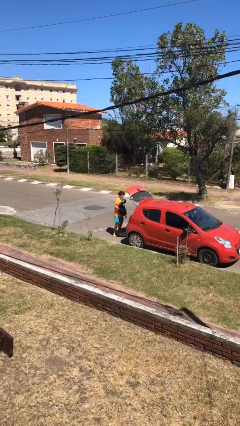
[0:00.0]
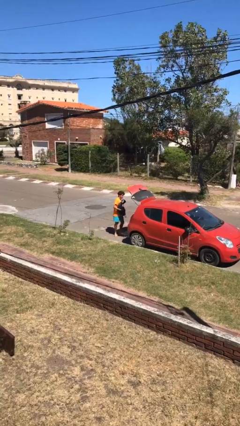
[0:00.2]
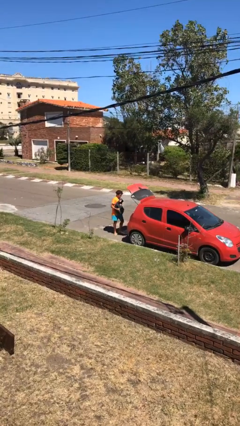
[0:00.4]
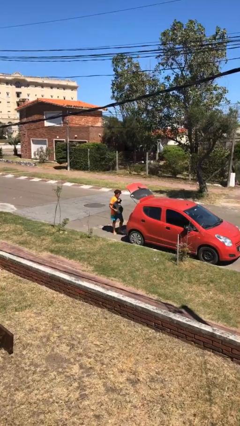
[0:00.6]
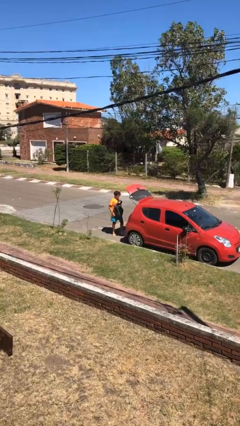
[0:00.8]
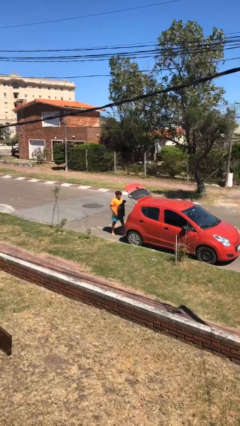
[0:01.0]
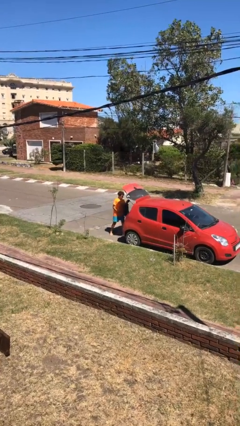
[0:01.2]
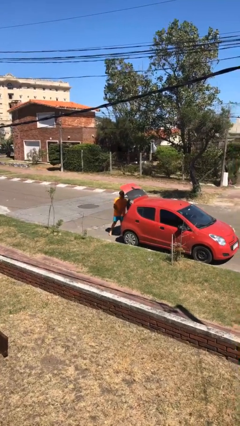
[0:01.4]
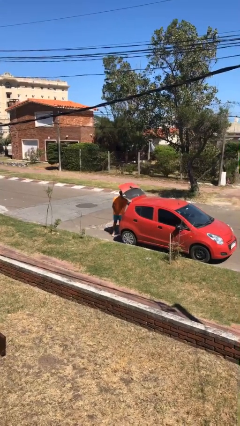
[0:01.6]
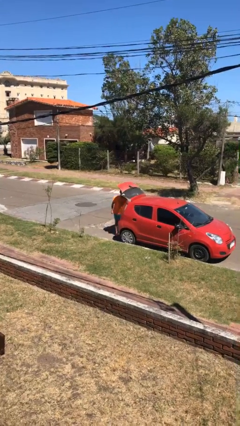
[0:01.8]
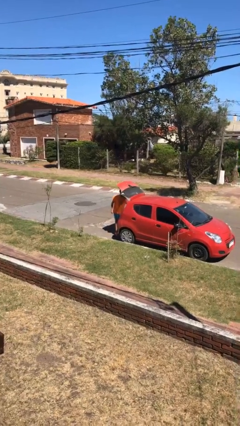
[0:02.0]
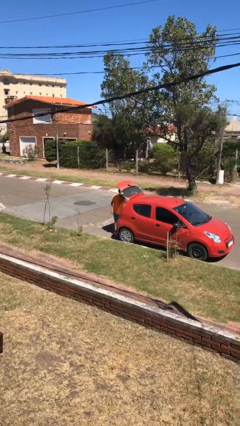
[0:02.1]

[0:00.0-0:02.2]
person loads car

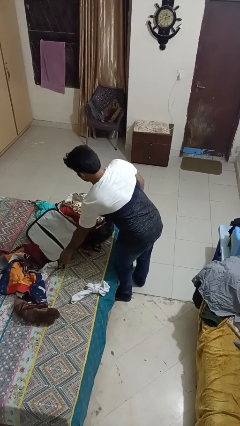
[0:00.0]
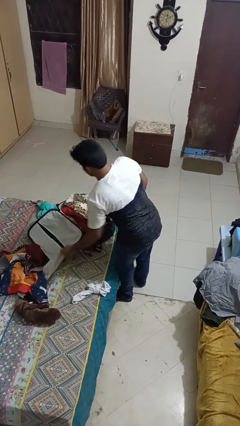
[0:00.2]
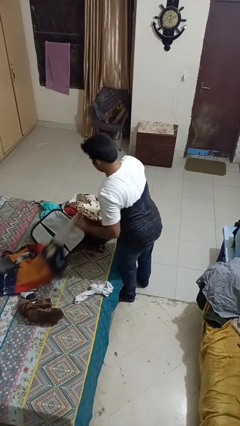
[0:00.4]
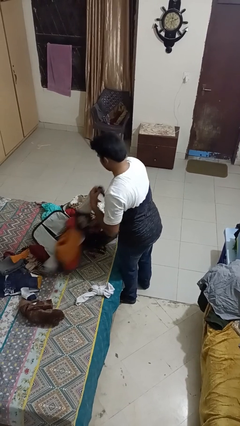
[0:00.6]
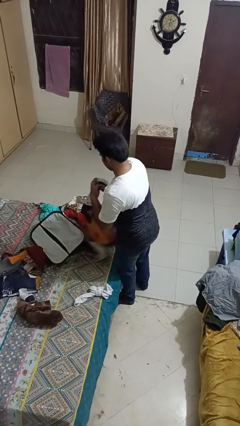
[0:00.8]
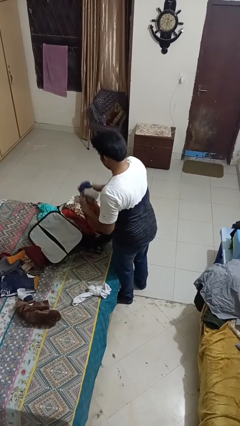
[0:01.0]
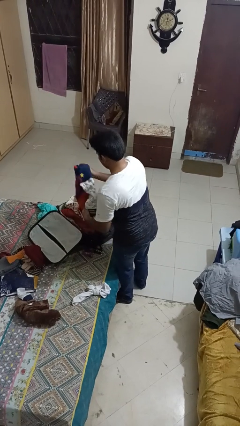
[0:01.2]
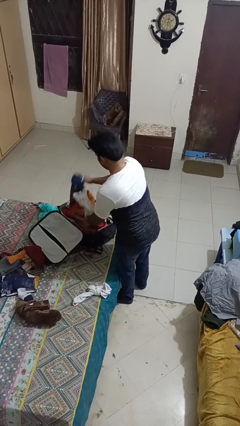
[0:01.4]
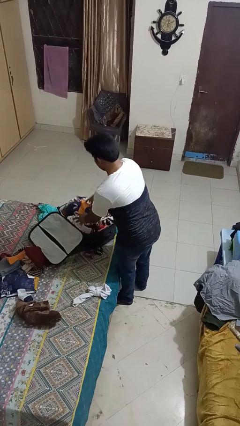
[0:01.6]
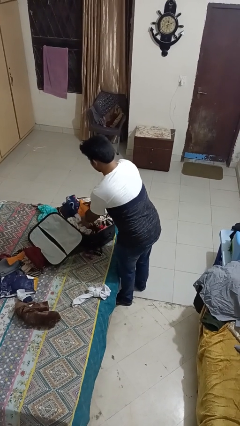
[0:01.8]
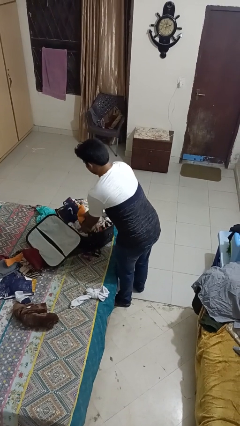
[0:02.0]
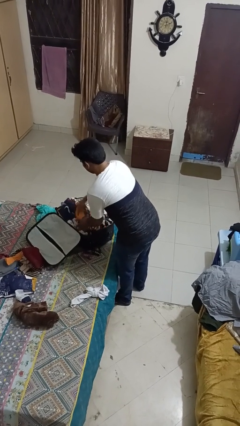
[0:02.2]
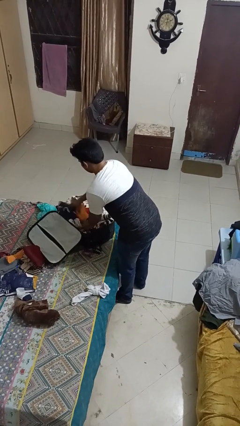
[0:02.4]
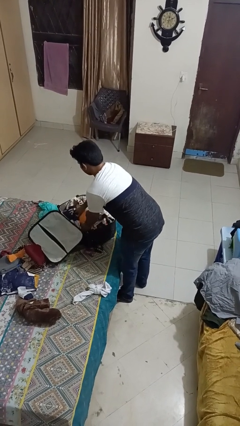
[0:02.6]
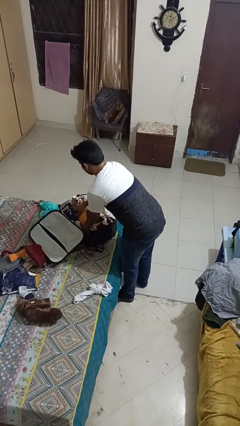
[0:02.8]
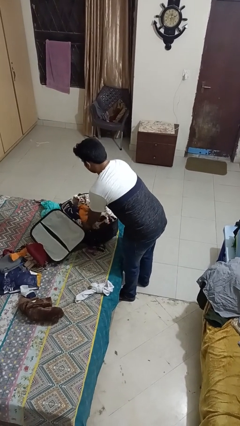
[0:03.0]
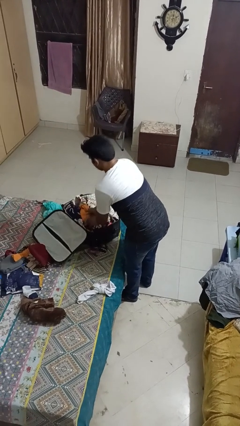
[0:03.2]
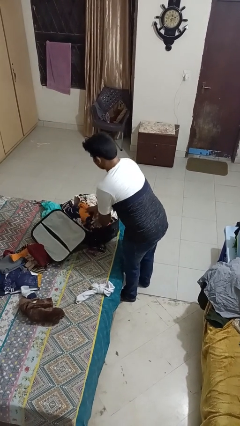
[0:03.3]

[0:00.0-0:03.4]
person loads clothes into suitcase

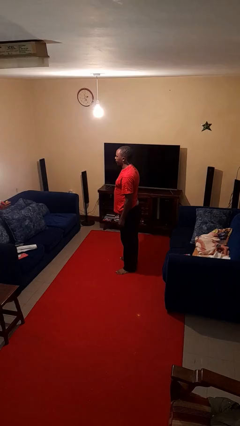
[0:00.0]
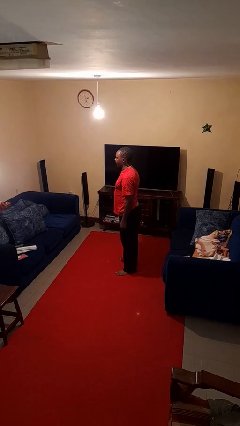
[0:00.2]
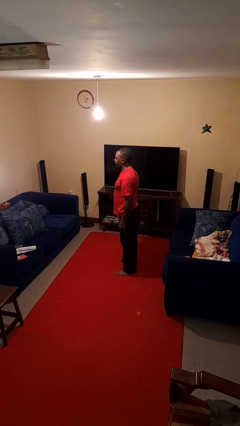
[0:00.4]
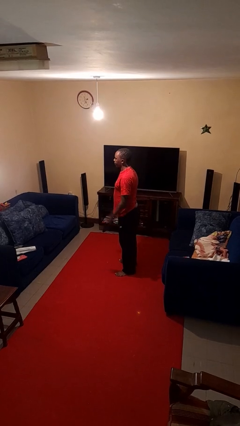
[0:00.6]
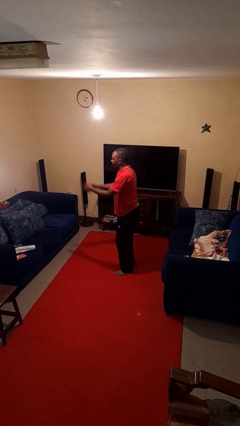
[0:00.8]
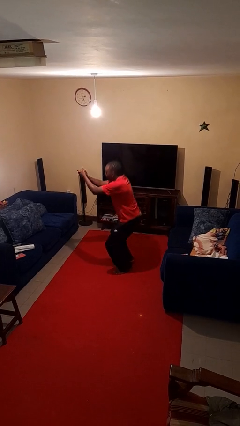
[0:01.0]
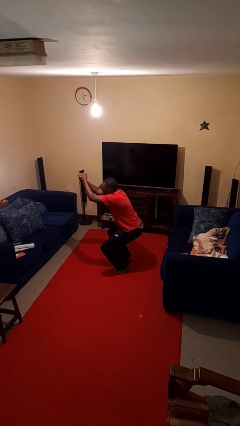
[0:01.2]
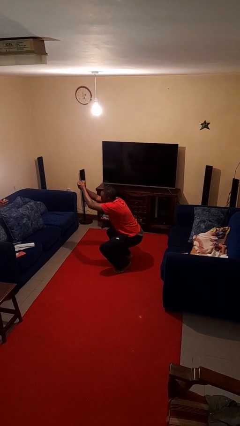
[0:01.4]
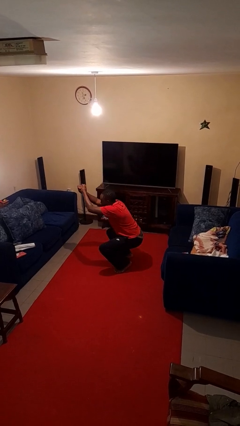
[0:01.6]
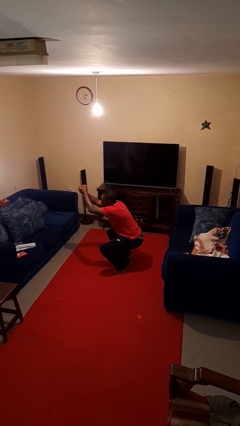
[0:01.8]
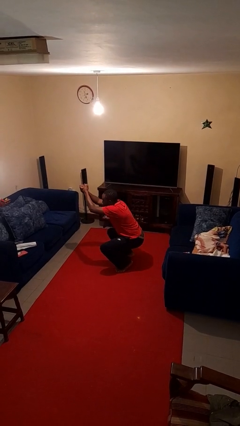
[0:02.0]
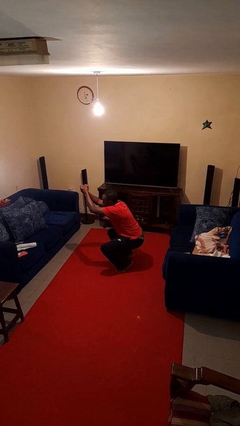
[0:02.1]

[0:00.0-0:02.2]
person squats

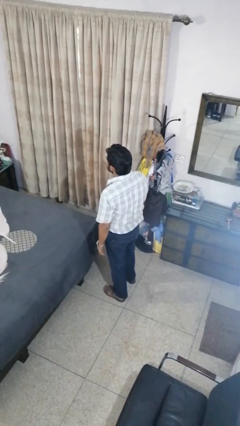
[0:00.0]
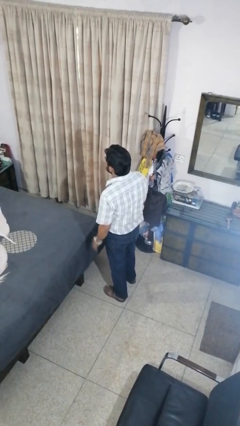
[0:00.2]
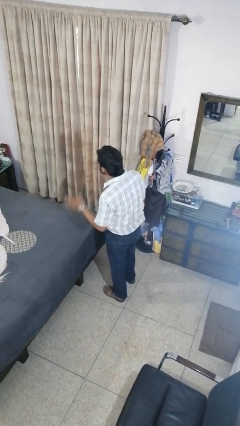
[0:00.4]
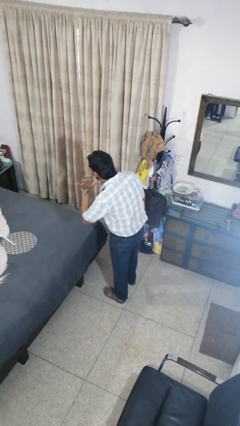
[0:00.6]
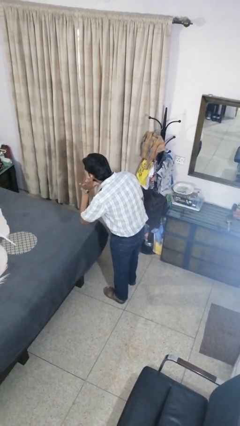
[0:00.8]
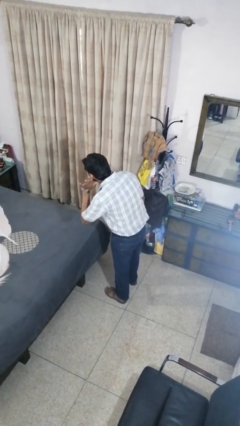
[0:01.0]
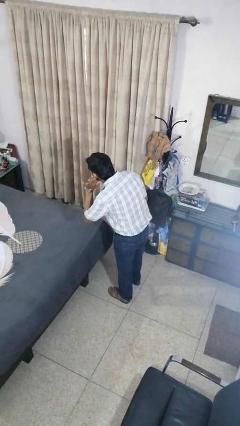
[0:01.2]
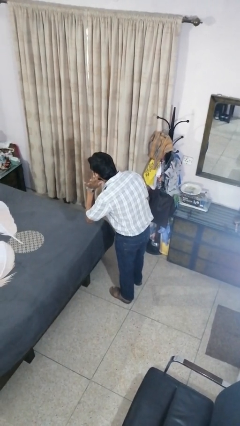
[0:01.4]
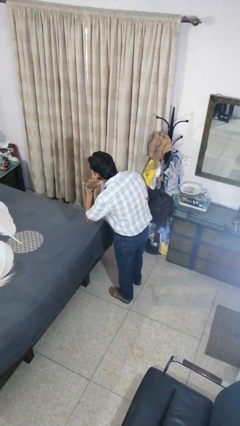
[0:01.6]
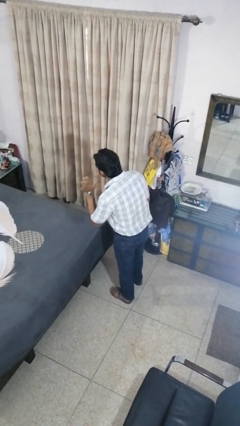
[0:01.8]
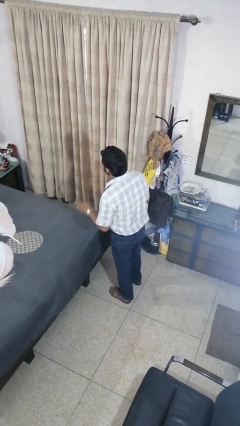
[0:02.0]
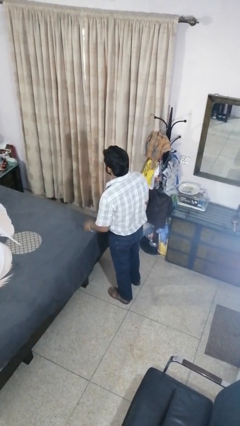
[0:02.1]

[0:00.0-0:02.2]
person gestures listen closely

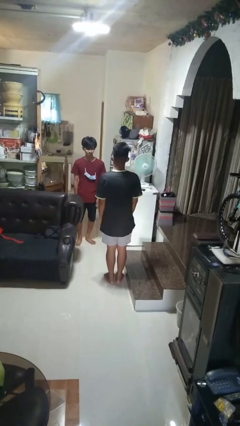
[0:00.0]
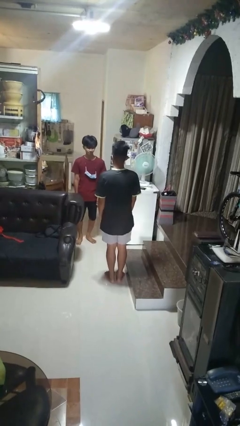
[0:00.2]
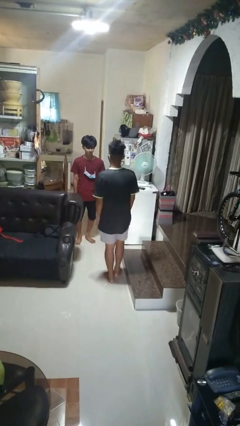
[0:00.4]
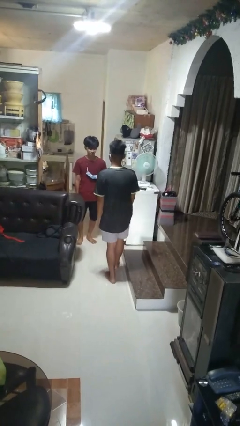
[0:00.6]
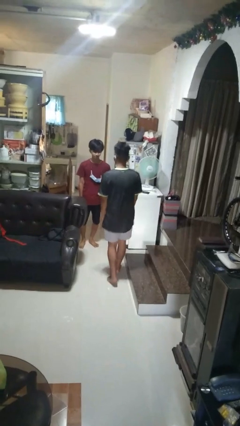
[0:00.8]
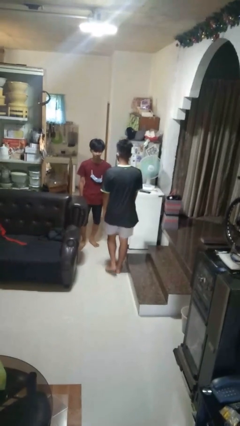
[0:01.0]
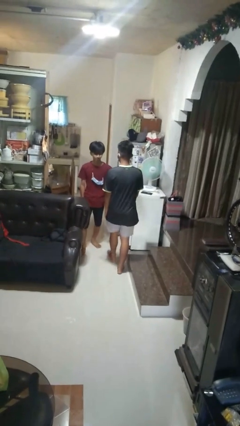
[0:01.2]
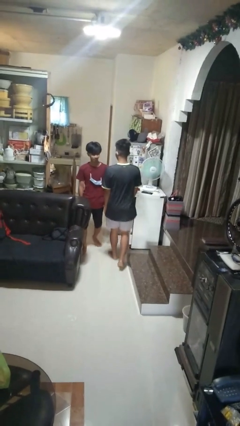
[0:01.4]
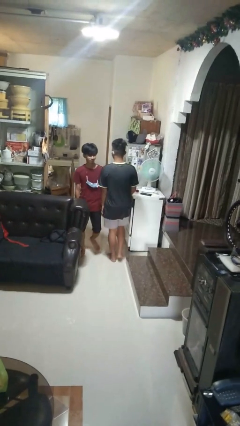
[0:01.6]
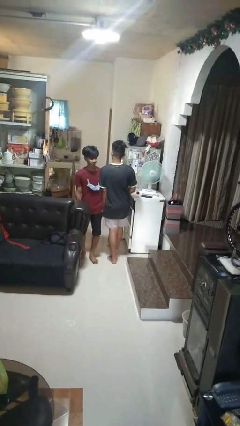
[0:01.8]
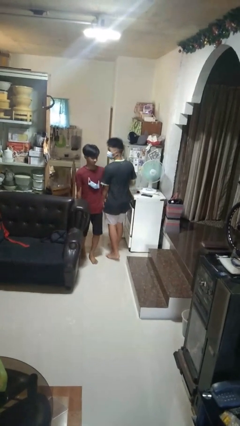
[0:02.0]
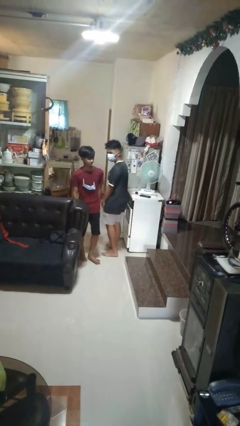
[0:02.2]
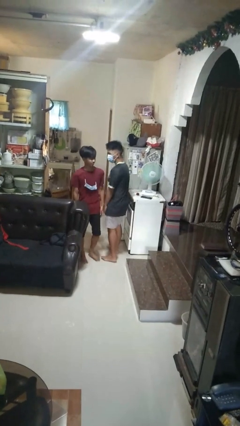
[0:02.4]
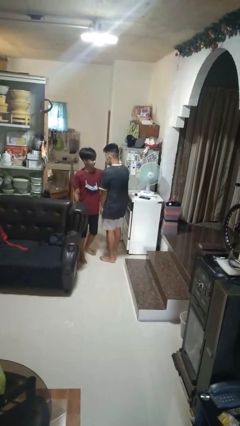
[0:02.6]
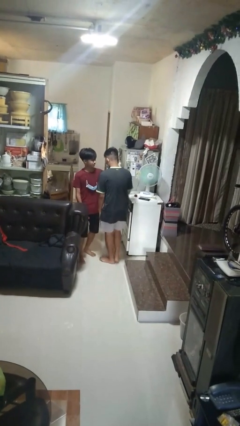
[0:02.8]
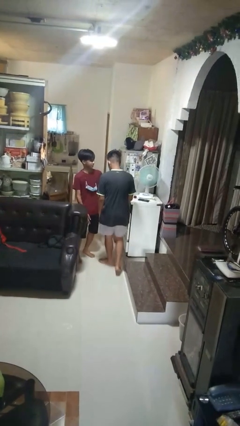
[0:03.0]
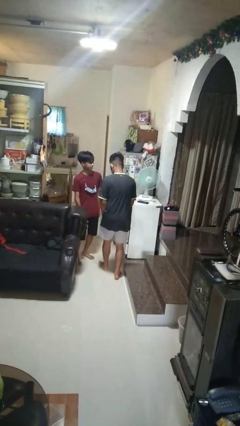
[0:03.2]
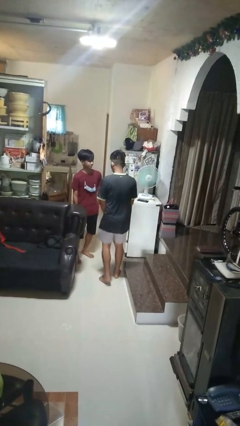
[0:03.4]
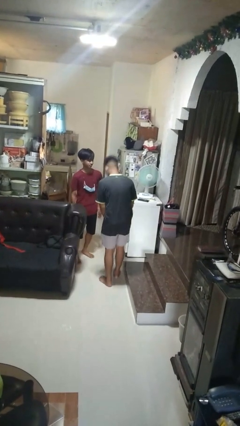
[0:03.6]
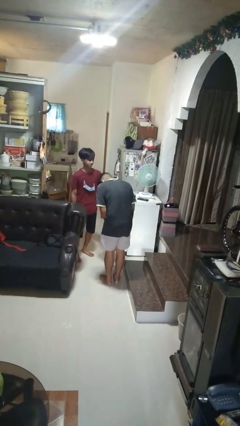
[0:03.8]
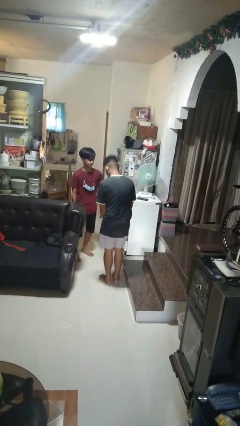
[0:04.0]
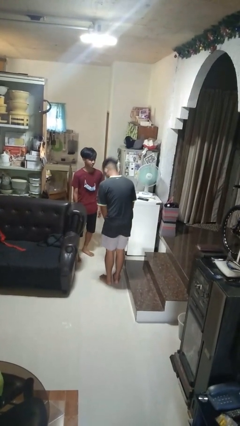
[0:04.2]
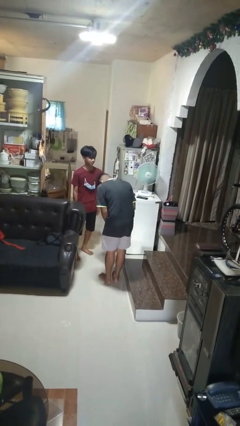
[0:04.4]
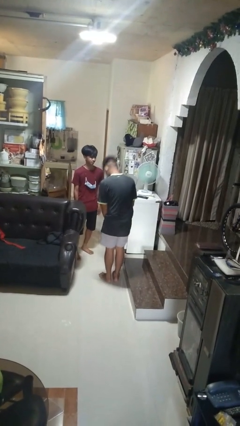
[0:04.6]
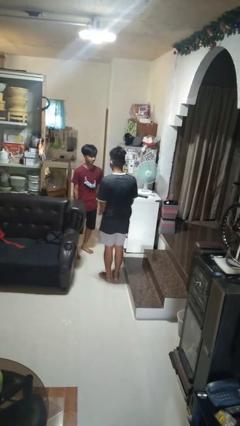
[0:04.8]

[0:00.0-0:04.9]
person bumps into person

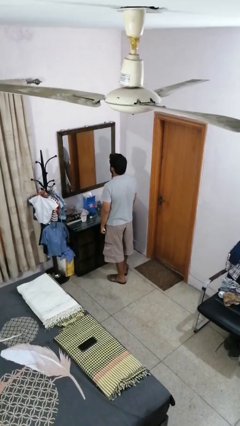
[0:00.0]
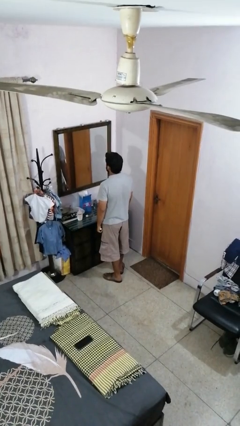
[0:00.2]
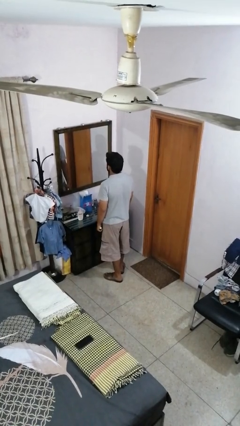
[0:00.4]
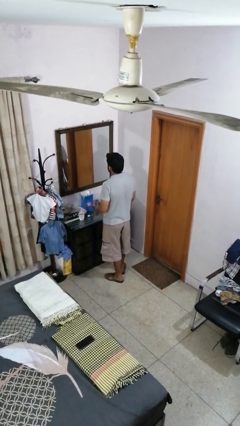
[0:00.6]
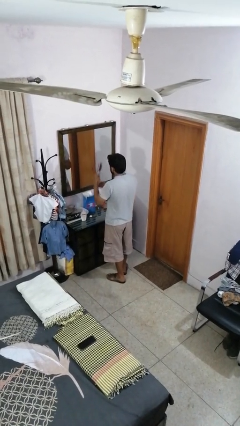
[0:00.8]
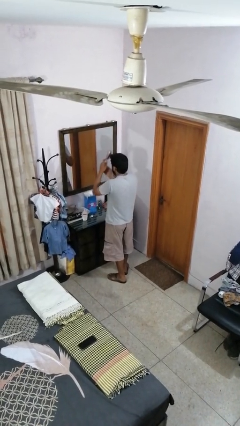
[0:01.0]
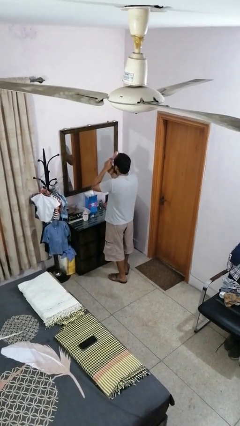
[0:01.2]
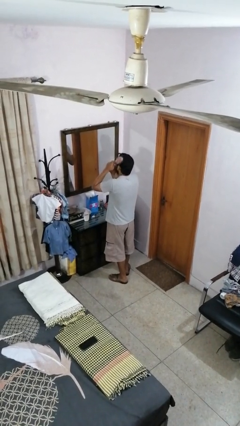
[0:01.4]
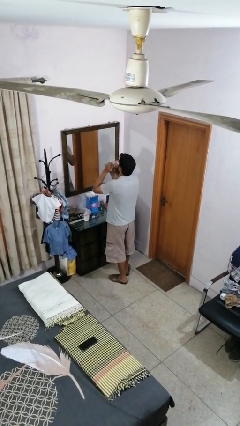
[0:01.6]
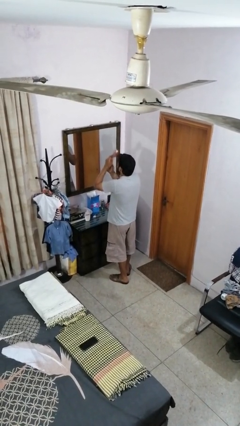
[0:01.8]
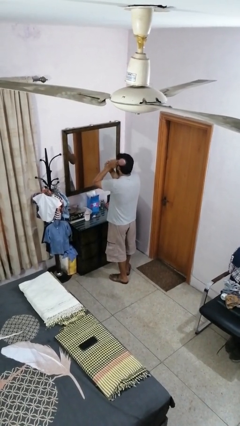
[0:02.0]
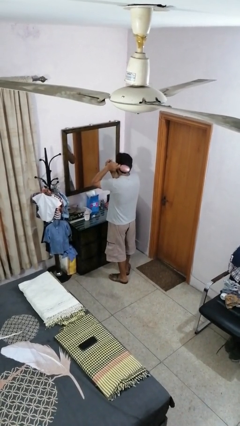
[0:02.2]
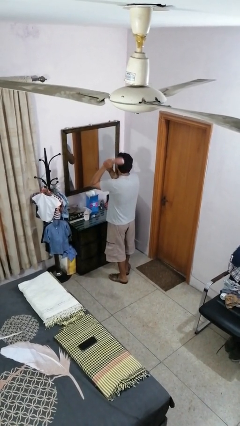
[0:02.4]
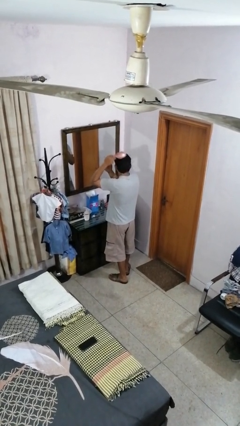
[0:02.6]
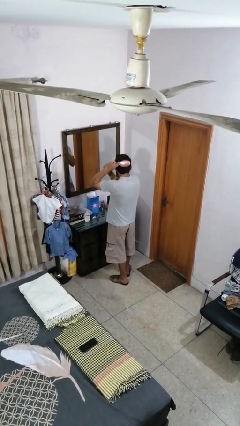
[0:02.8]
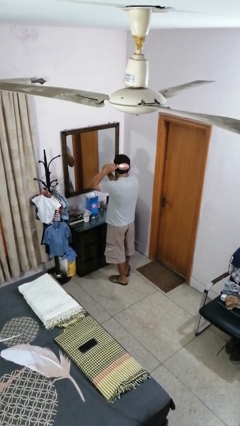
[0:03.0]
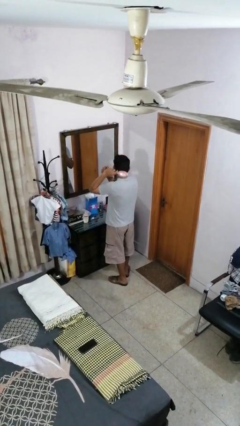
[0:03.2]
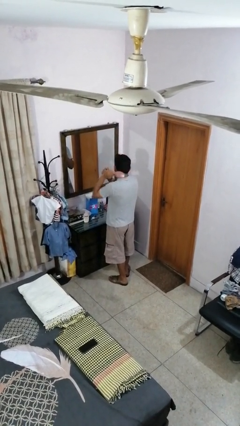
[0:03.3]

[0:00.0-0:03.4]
person brushes hair
